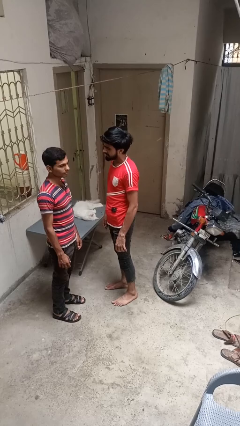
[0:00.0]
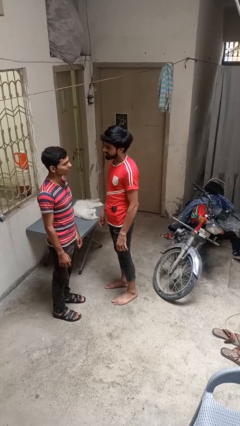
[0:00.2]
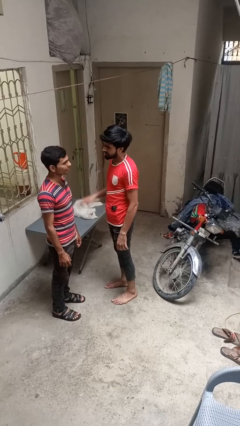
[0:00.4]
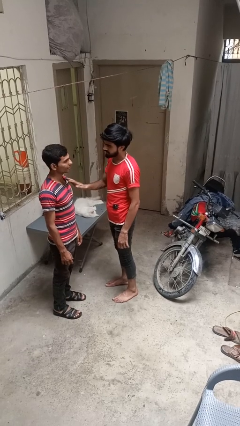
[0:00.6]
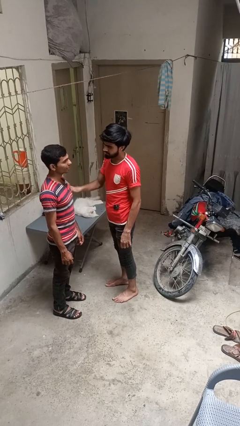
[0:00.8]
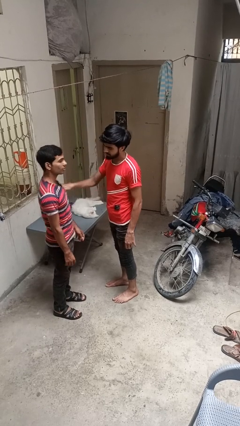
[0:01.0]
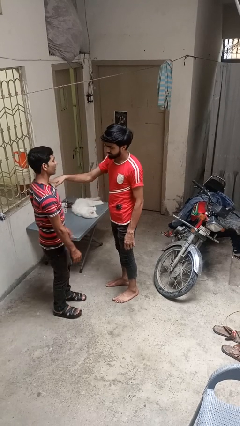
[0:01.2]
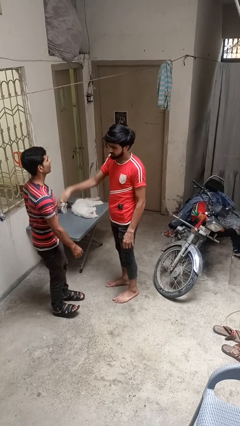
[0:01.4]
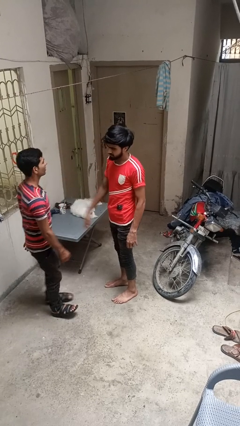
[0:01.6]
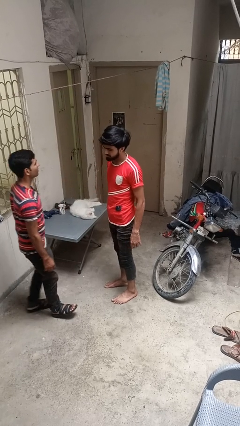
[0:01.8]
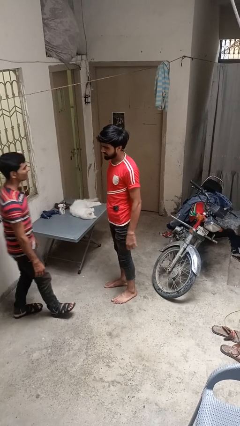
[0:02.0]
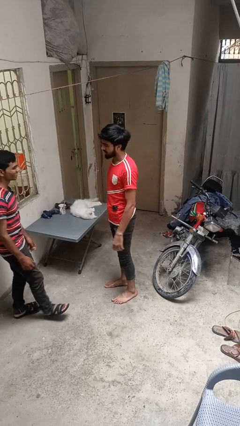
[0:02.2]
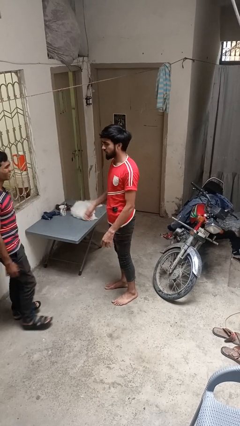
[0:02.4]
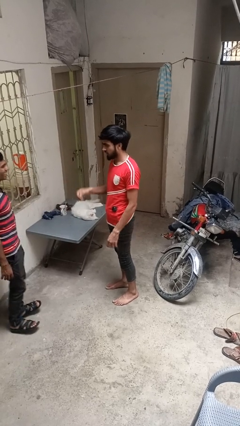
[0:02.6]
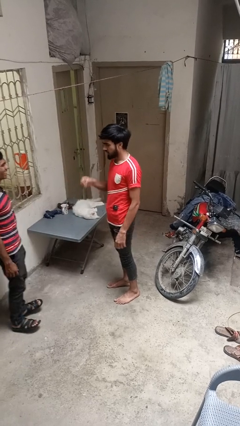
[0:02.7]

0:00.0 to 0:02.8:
person shoves person

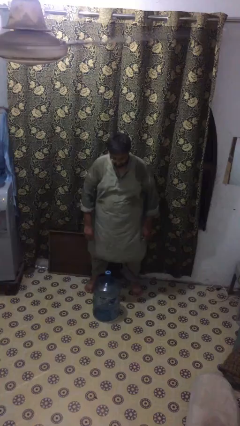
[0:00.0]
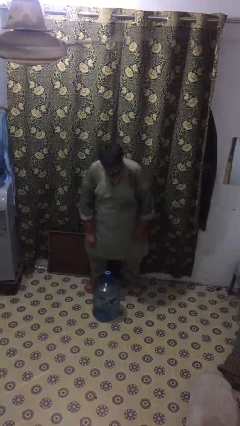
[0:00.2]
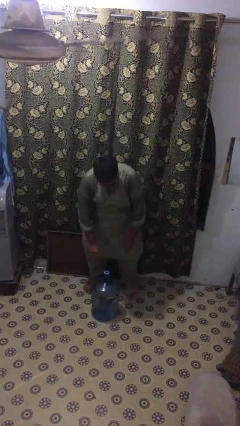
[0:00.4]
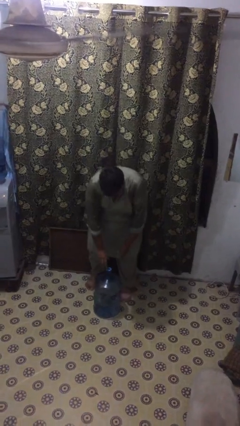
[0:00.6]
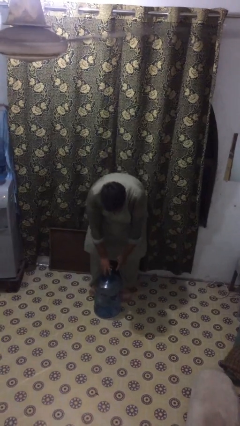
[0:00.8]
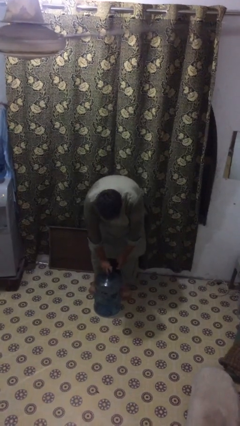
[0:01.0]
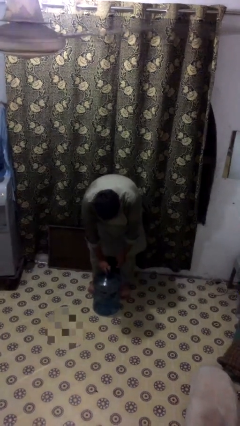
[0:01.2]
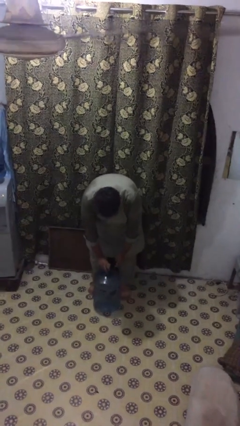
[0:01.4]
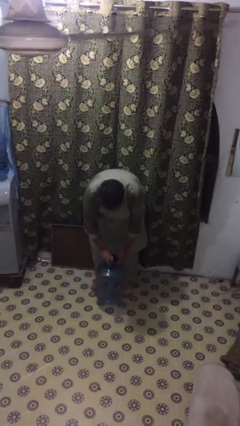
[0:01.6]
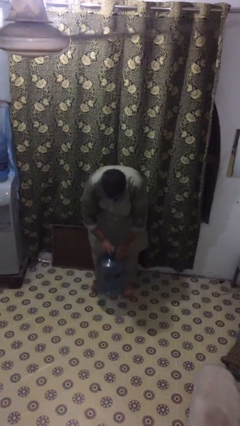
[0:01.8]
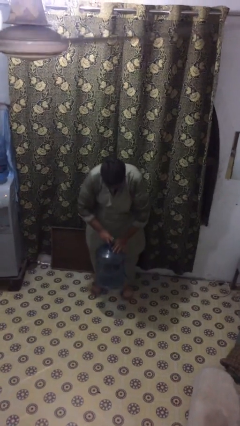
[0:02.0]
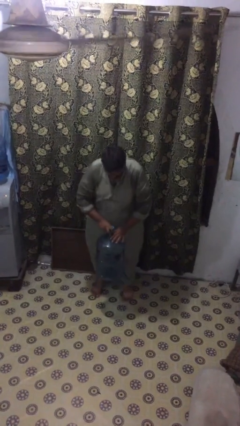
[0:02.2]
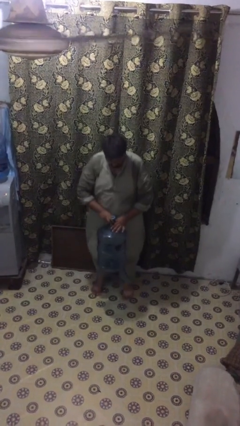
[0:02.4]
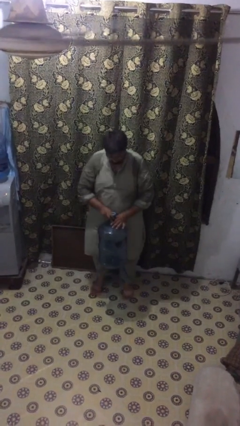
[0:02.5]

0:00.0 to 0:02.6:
person picks up object from floor

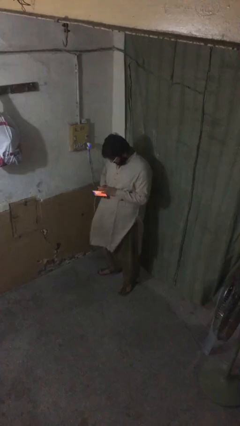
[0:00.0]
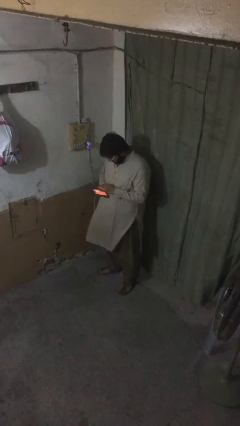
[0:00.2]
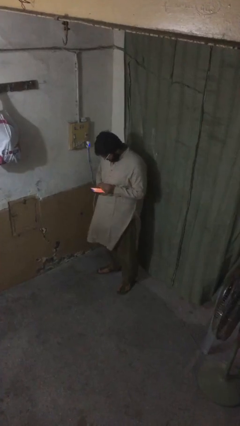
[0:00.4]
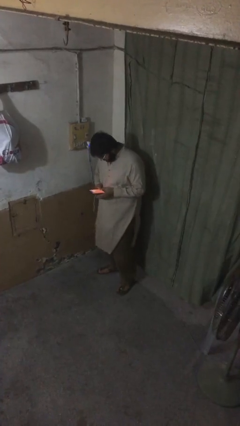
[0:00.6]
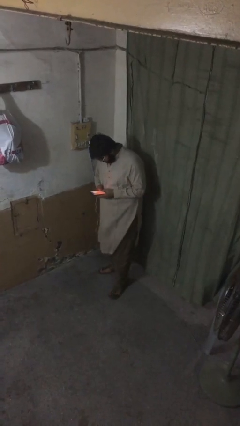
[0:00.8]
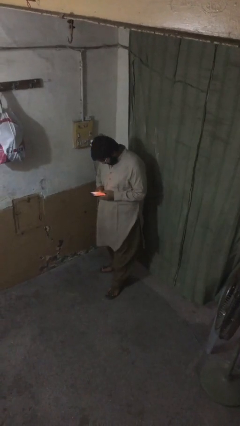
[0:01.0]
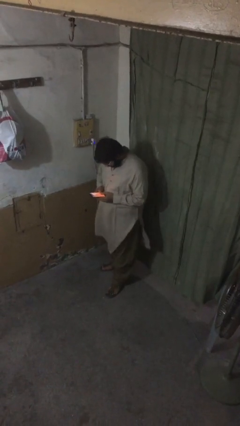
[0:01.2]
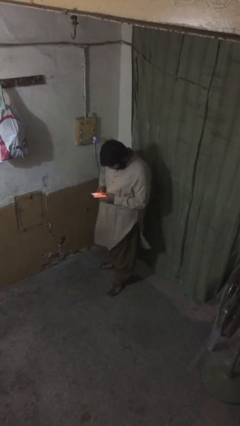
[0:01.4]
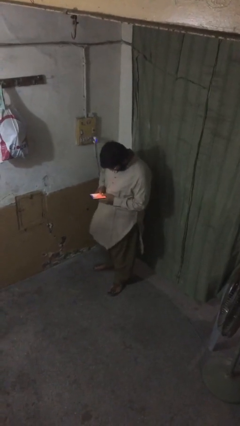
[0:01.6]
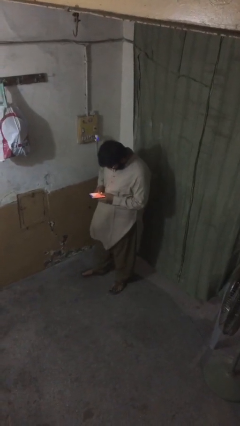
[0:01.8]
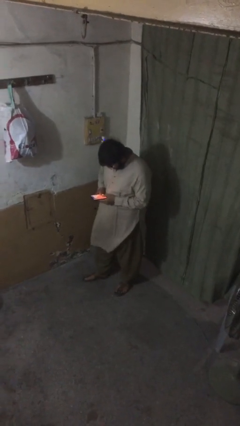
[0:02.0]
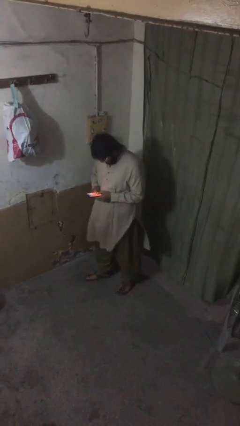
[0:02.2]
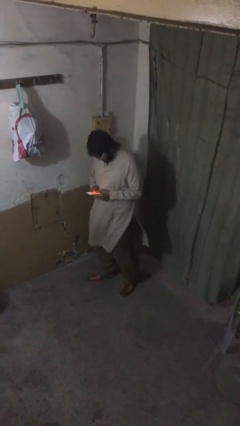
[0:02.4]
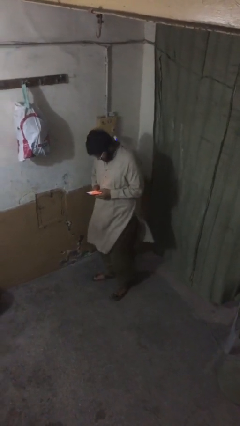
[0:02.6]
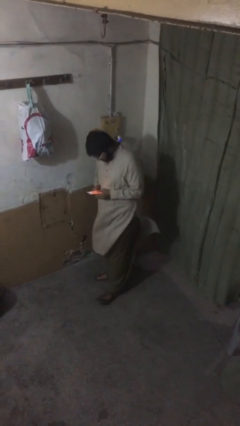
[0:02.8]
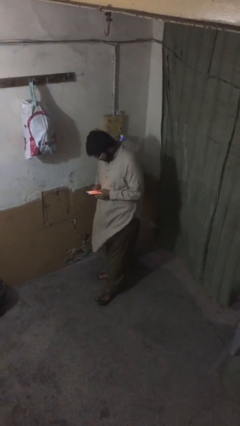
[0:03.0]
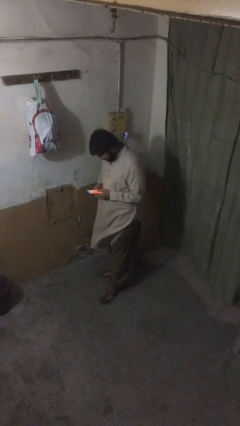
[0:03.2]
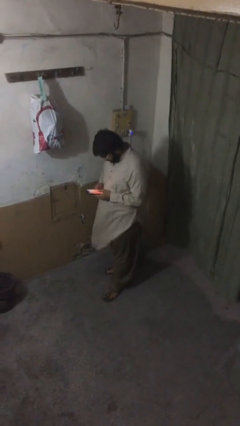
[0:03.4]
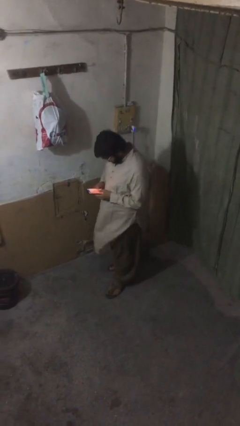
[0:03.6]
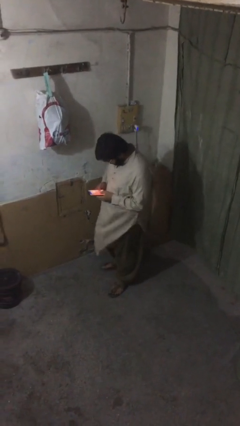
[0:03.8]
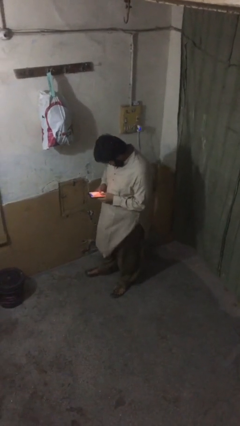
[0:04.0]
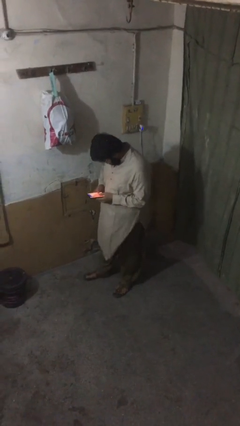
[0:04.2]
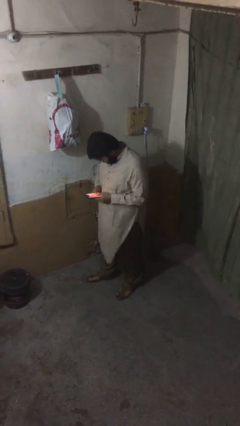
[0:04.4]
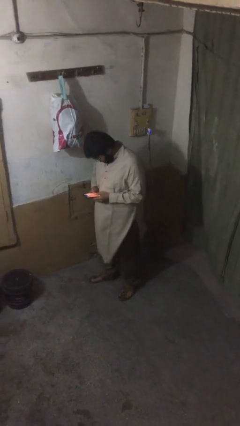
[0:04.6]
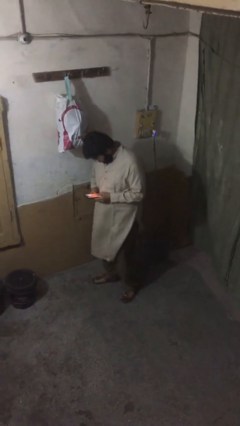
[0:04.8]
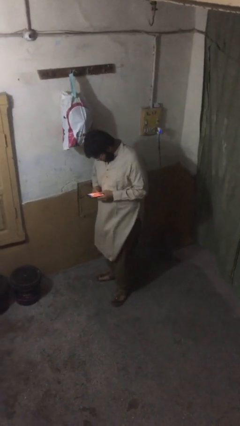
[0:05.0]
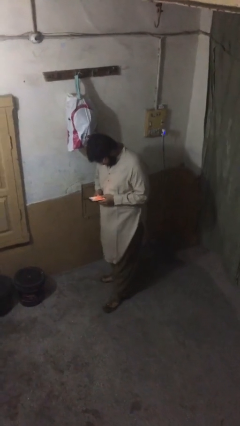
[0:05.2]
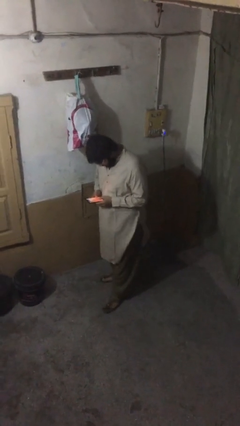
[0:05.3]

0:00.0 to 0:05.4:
person texts on phone

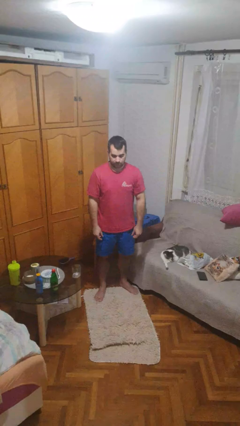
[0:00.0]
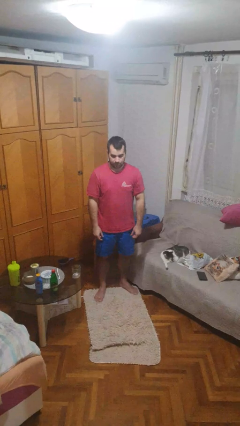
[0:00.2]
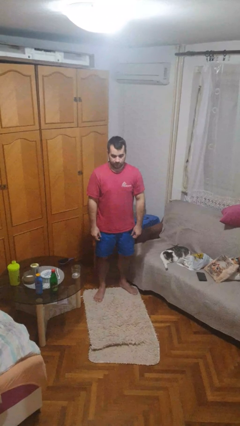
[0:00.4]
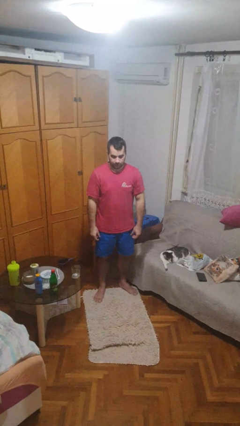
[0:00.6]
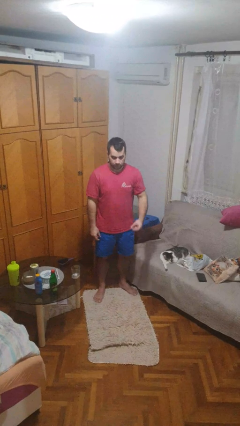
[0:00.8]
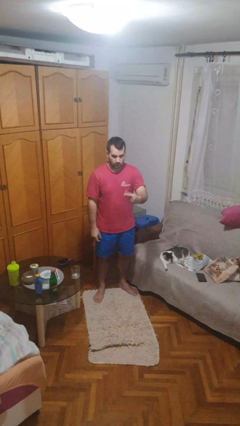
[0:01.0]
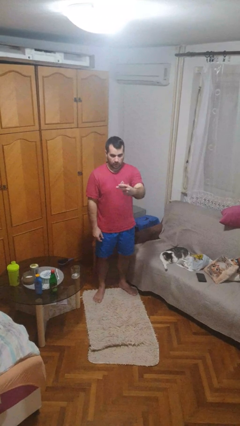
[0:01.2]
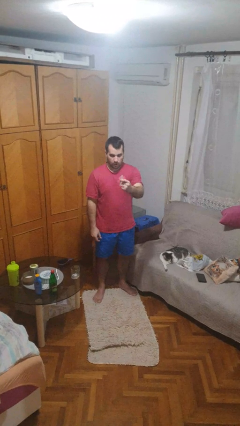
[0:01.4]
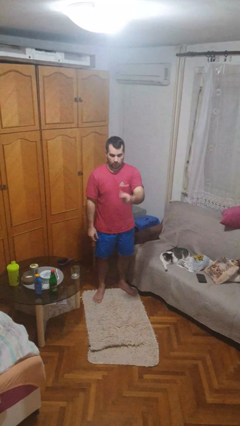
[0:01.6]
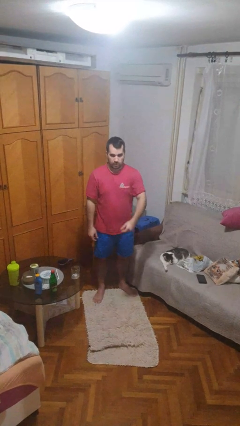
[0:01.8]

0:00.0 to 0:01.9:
person snaps fingers

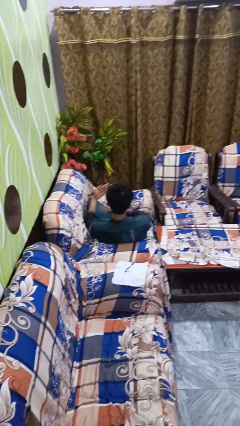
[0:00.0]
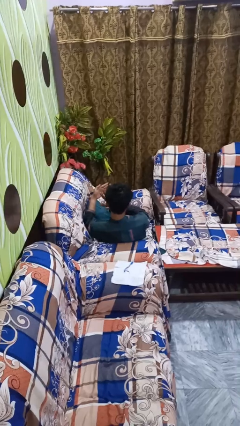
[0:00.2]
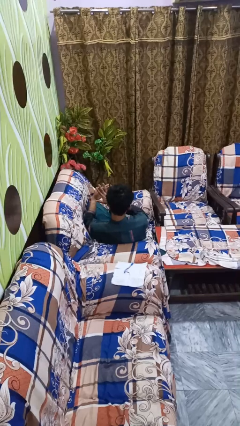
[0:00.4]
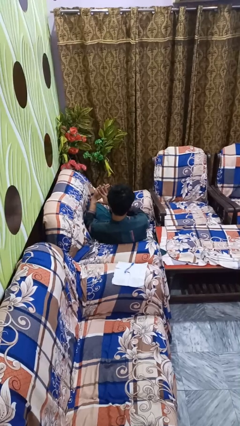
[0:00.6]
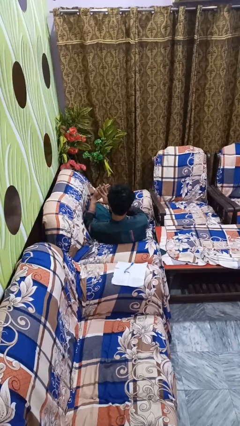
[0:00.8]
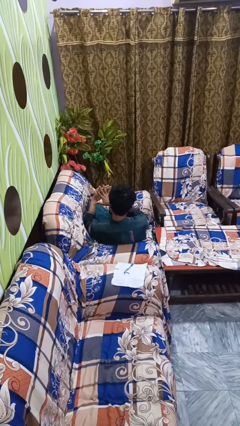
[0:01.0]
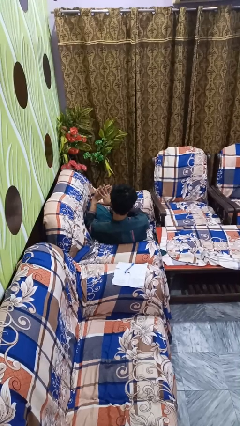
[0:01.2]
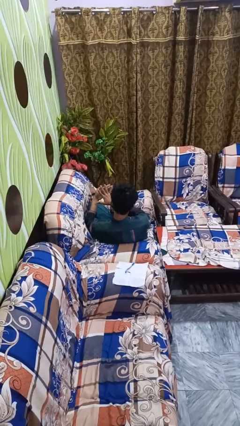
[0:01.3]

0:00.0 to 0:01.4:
person gestures number five

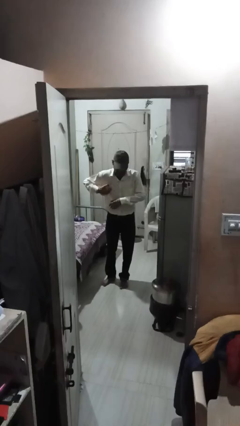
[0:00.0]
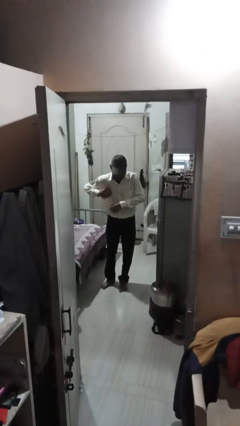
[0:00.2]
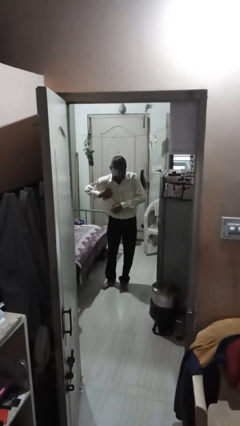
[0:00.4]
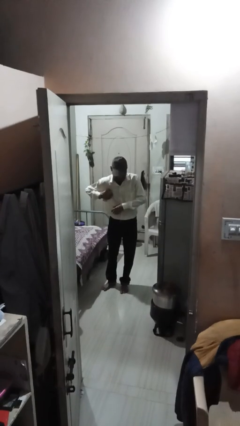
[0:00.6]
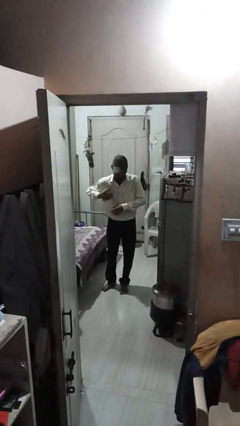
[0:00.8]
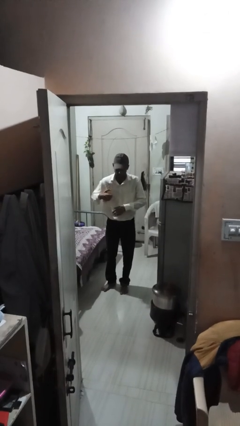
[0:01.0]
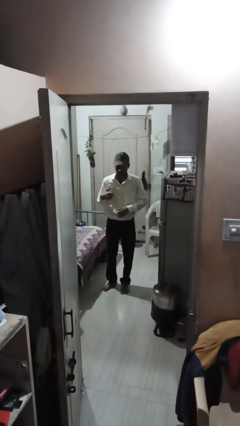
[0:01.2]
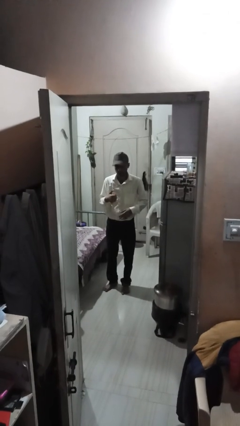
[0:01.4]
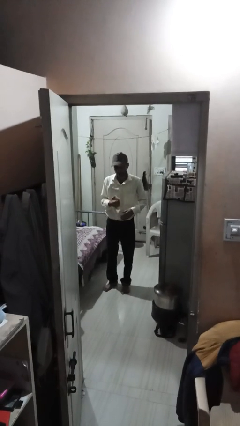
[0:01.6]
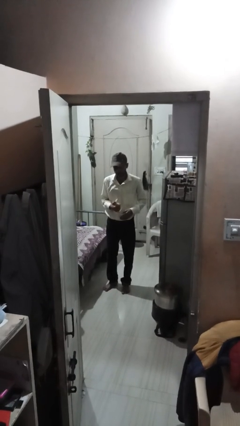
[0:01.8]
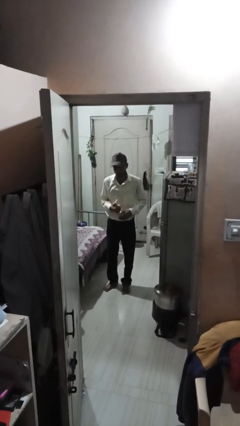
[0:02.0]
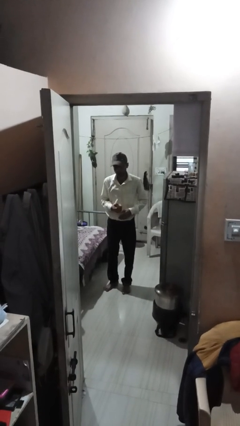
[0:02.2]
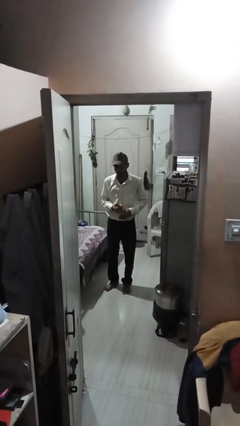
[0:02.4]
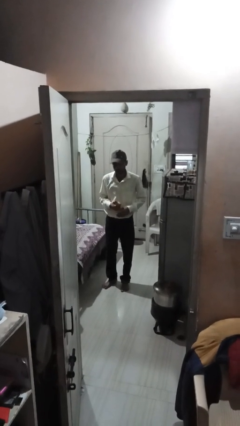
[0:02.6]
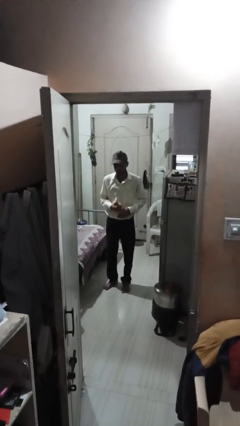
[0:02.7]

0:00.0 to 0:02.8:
person applies deodorant

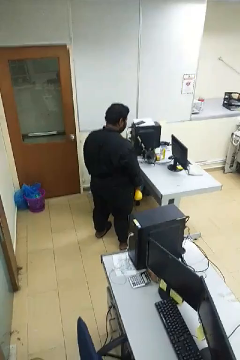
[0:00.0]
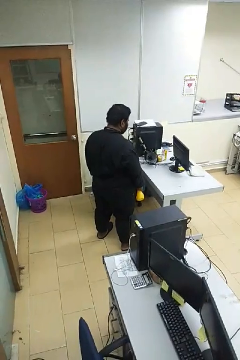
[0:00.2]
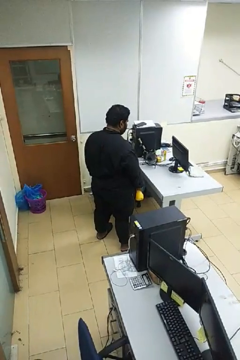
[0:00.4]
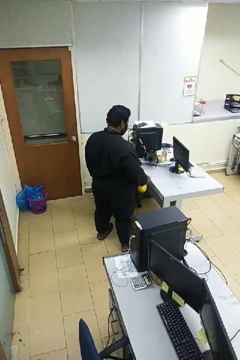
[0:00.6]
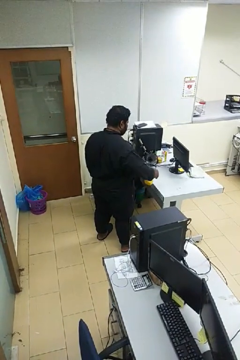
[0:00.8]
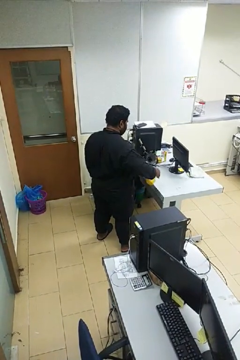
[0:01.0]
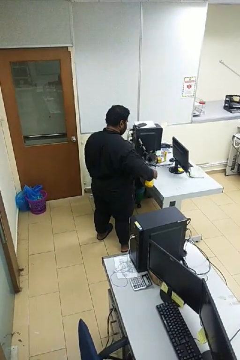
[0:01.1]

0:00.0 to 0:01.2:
person sprays from bottle
